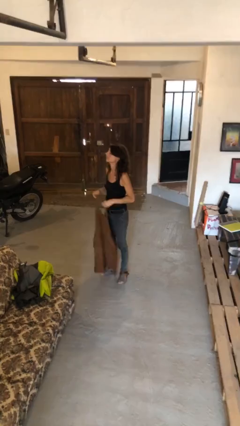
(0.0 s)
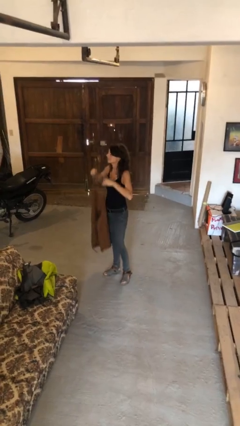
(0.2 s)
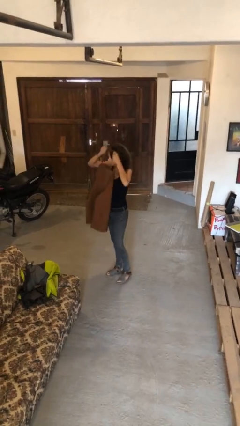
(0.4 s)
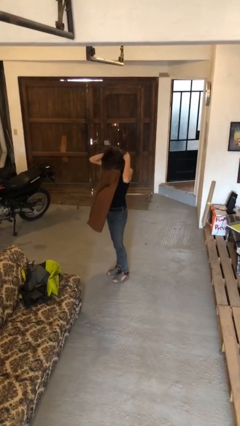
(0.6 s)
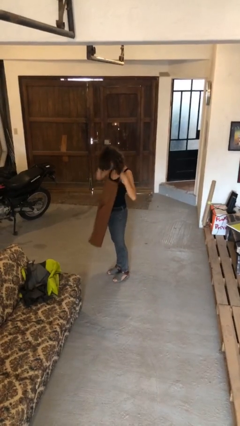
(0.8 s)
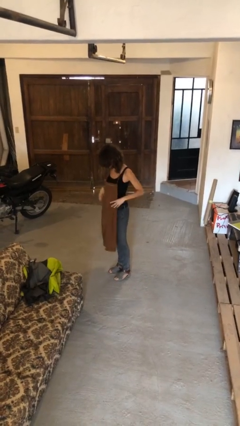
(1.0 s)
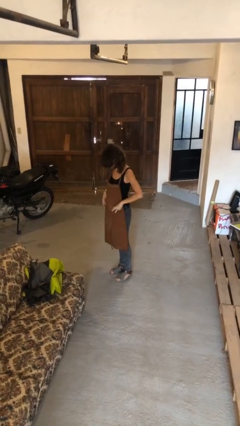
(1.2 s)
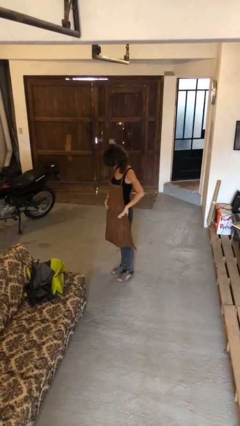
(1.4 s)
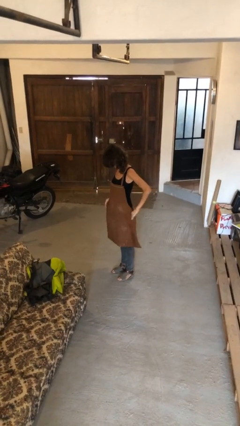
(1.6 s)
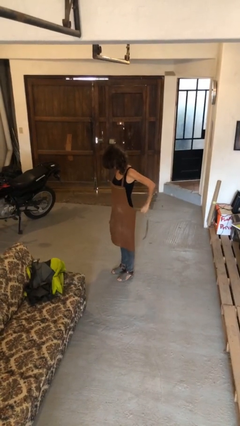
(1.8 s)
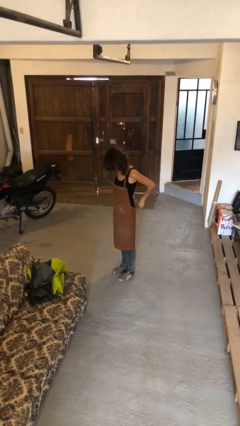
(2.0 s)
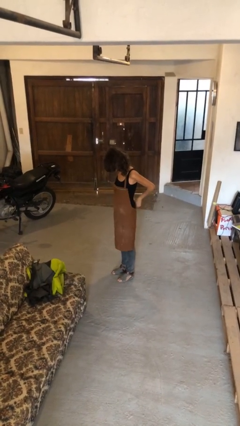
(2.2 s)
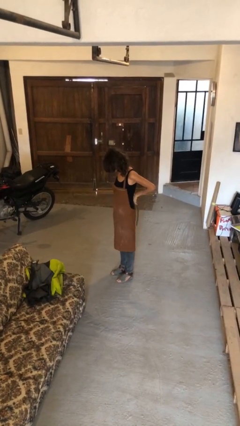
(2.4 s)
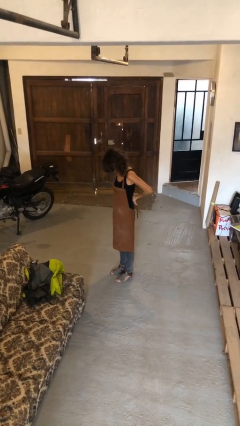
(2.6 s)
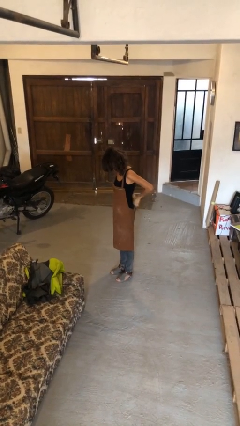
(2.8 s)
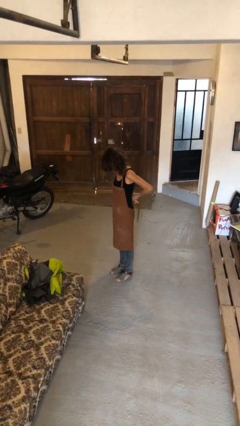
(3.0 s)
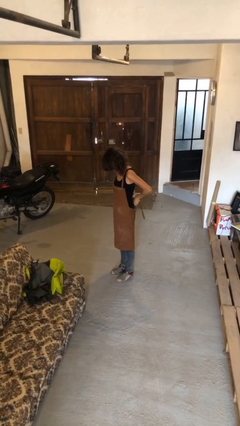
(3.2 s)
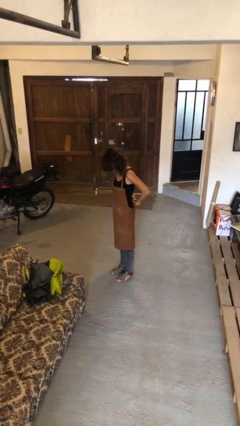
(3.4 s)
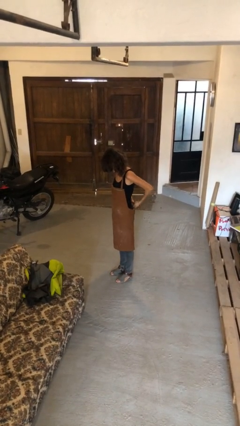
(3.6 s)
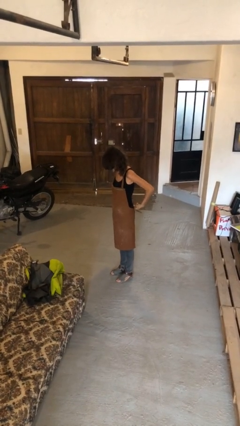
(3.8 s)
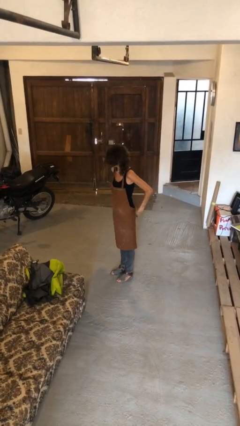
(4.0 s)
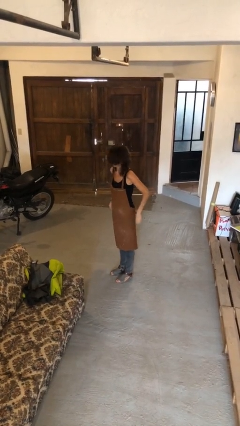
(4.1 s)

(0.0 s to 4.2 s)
person puts on apron

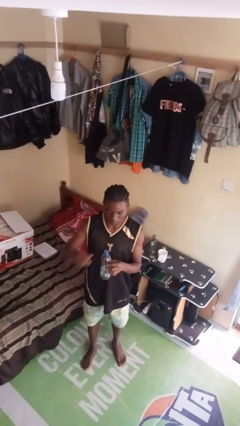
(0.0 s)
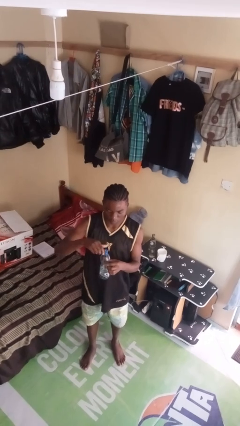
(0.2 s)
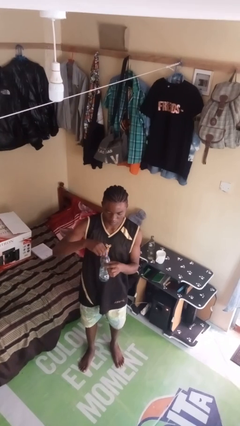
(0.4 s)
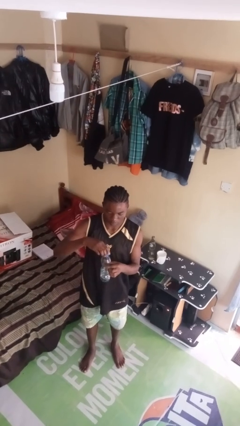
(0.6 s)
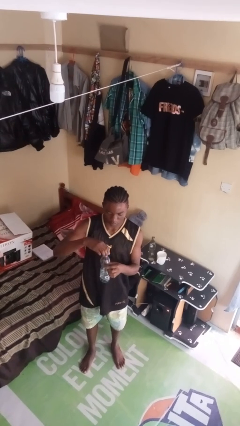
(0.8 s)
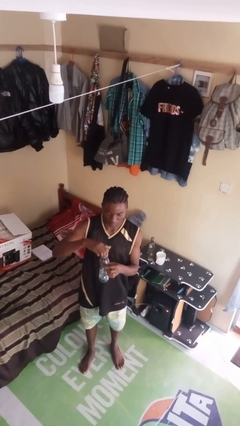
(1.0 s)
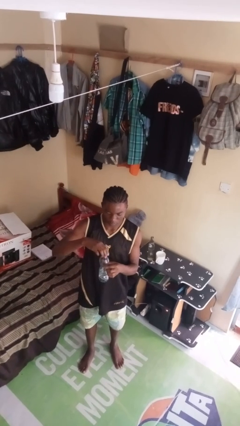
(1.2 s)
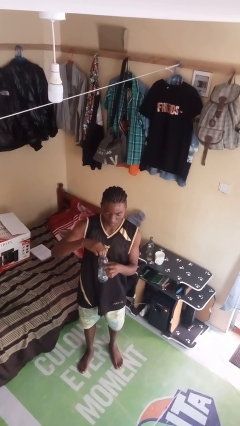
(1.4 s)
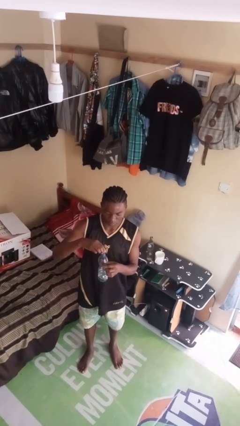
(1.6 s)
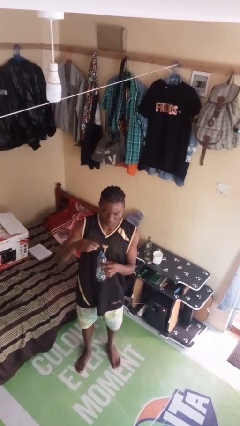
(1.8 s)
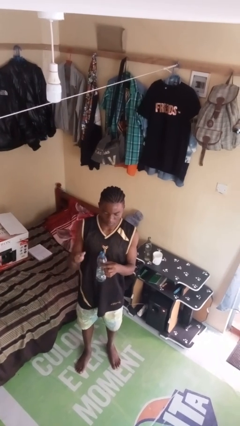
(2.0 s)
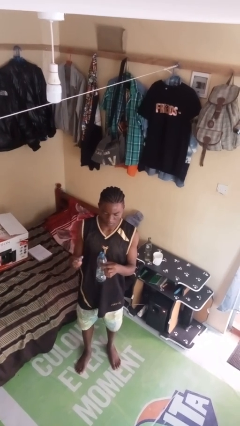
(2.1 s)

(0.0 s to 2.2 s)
person unscrews lid from bottle

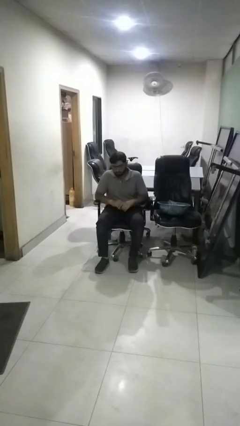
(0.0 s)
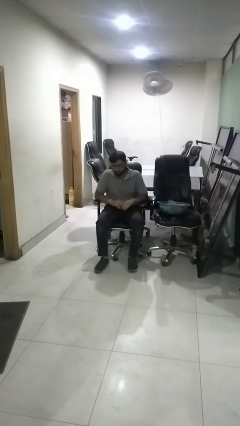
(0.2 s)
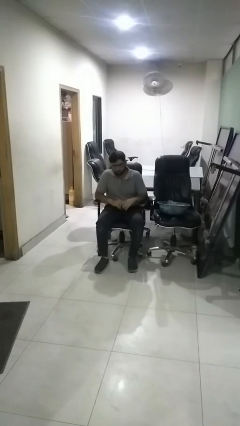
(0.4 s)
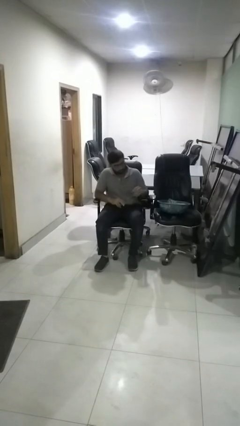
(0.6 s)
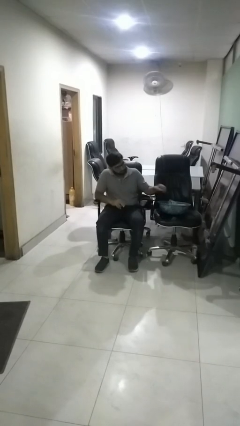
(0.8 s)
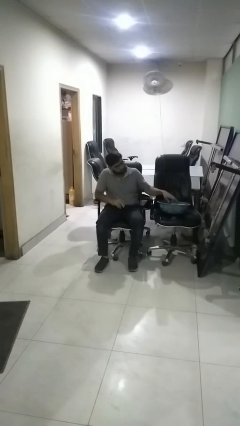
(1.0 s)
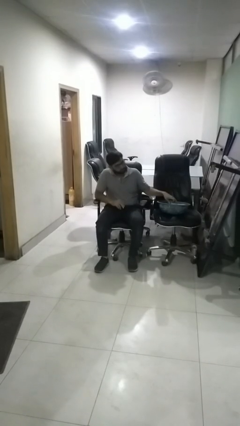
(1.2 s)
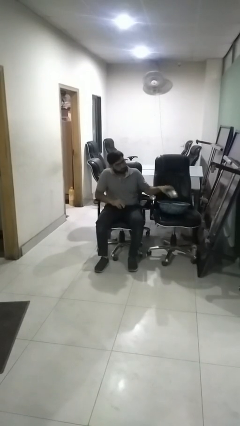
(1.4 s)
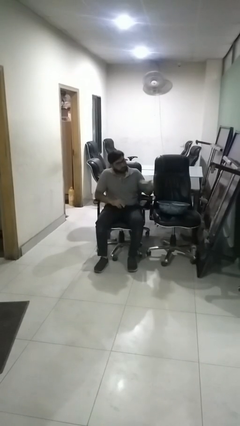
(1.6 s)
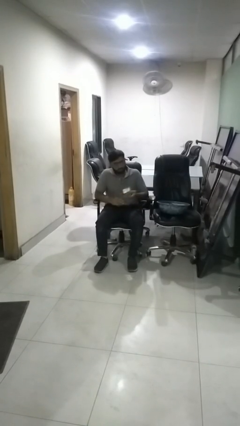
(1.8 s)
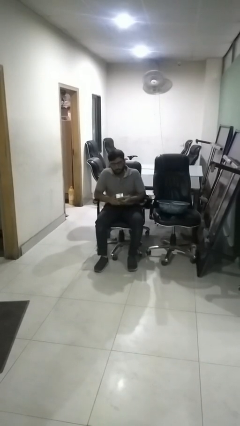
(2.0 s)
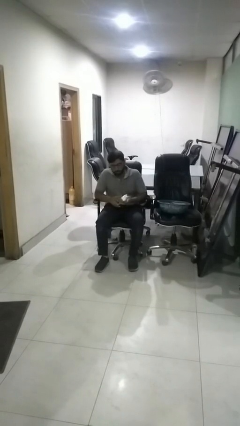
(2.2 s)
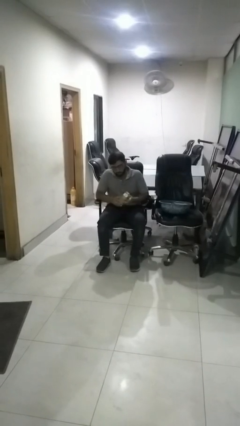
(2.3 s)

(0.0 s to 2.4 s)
person takes object from basket

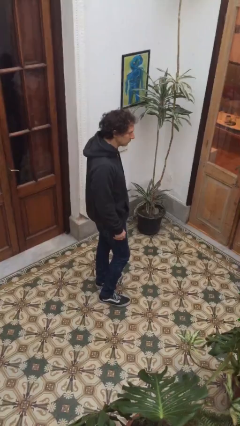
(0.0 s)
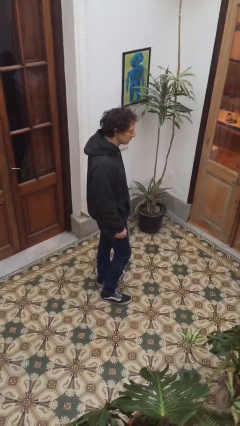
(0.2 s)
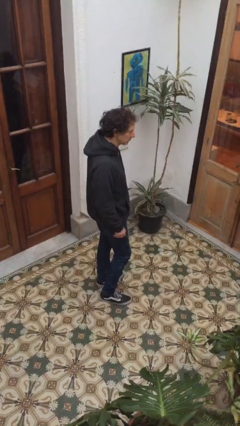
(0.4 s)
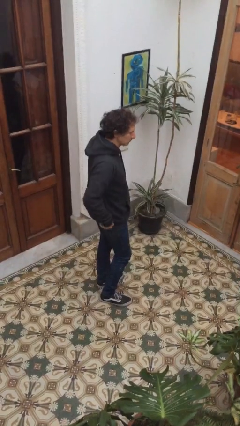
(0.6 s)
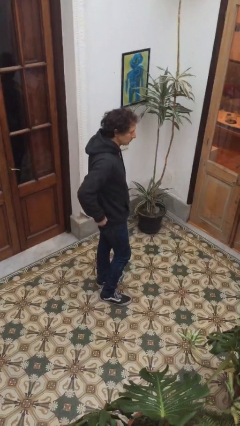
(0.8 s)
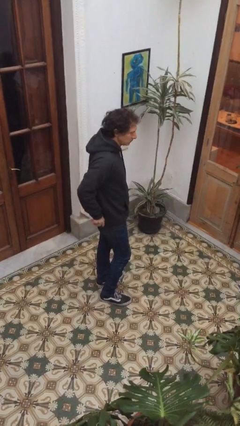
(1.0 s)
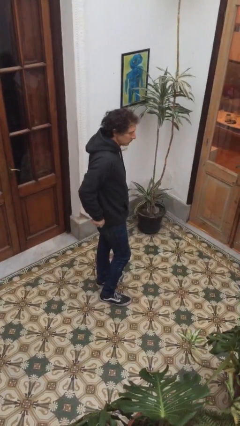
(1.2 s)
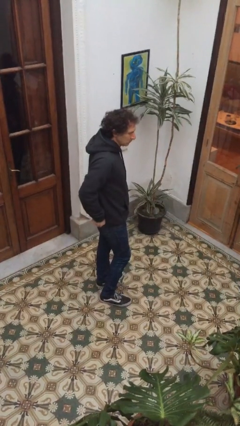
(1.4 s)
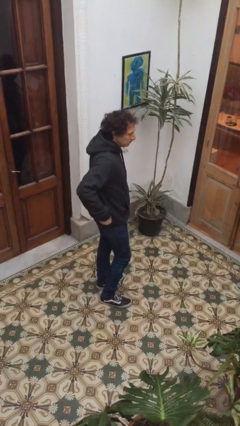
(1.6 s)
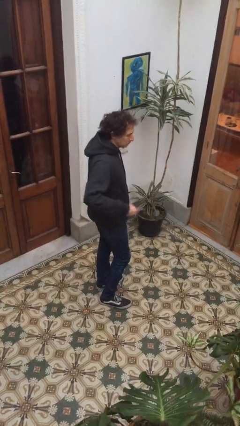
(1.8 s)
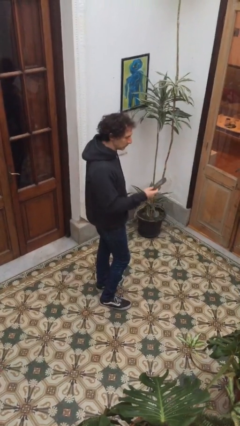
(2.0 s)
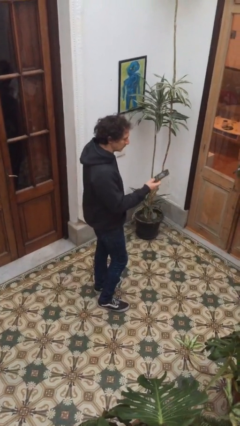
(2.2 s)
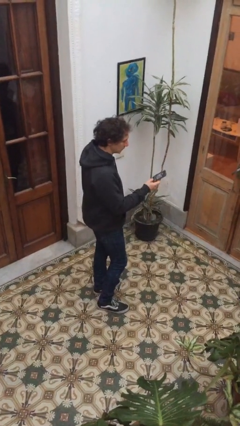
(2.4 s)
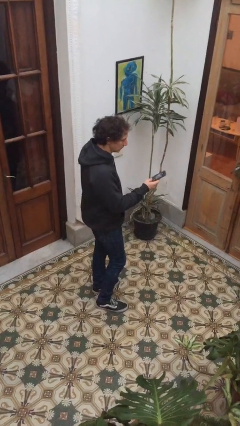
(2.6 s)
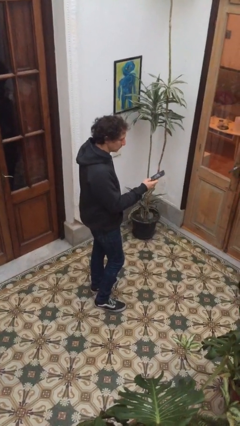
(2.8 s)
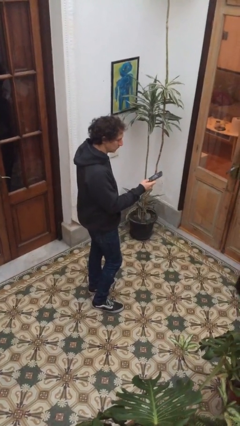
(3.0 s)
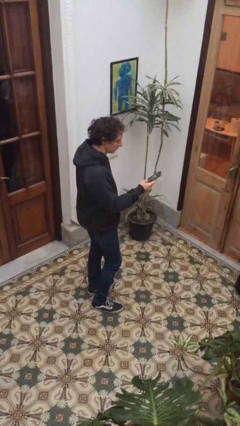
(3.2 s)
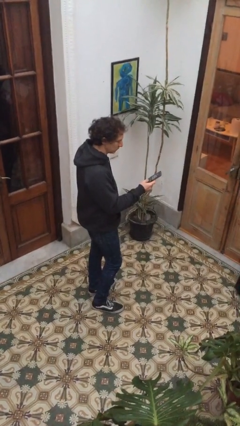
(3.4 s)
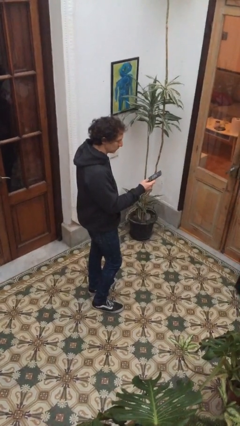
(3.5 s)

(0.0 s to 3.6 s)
person takes phone from pocket

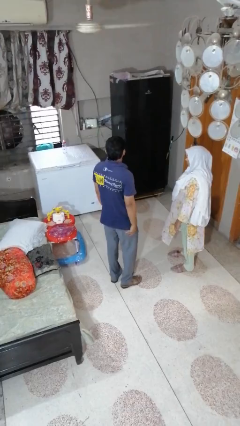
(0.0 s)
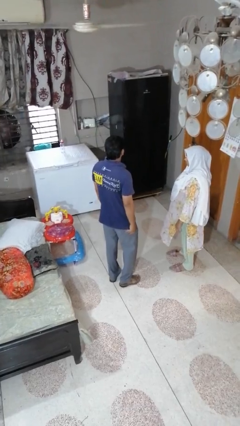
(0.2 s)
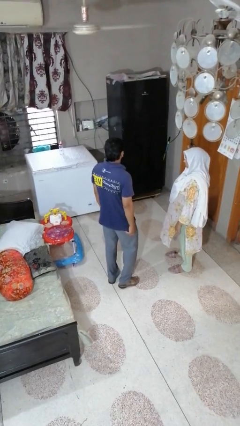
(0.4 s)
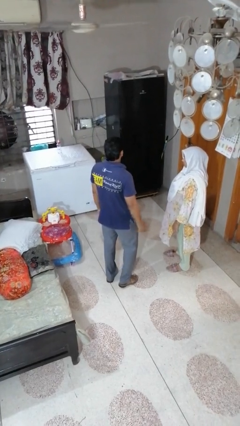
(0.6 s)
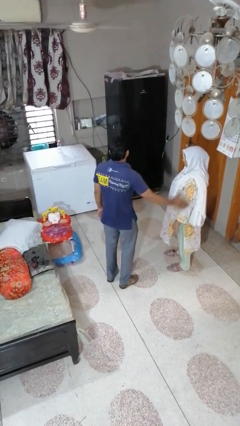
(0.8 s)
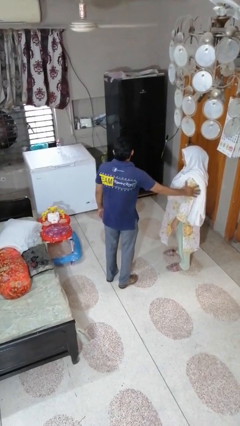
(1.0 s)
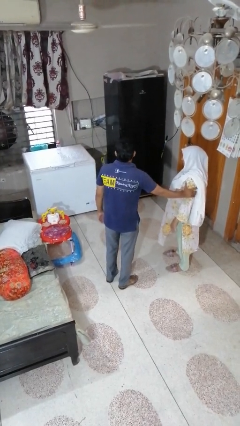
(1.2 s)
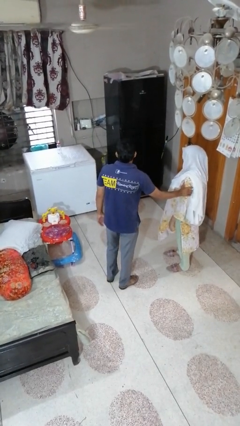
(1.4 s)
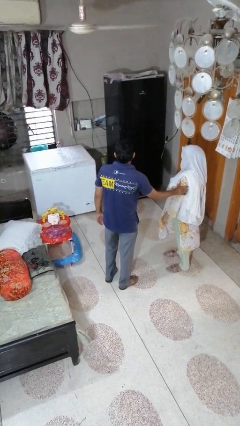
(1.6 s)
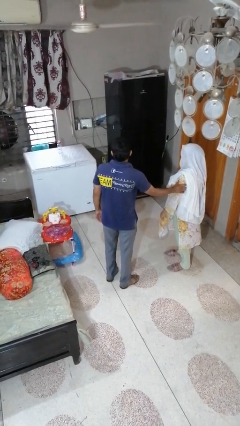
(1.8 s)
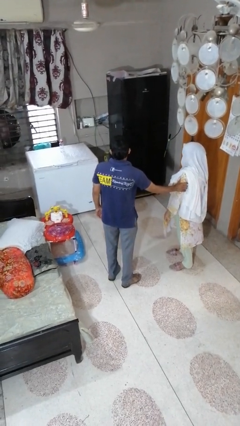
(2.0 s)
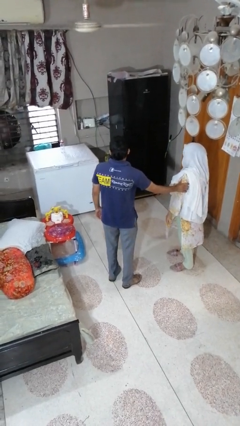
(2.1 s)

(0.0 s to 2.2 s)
person grabs person by bicep

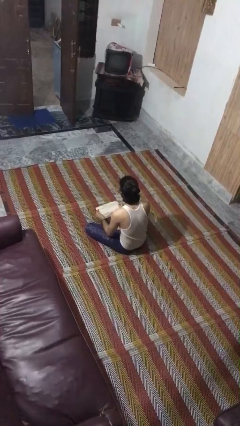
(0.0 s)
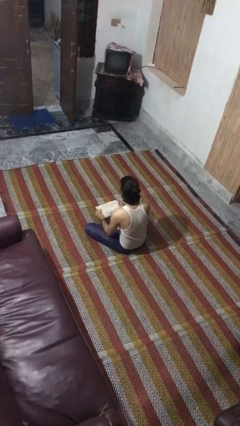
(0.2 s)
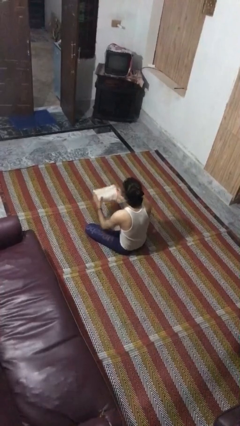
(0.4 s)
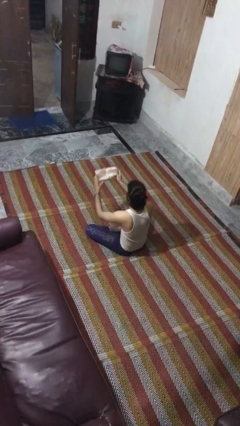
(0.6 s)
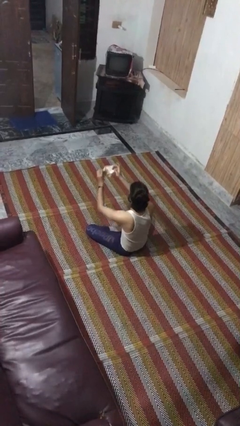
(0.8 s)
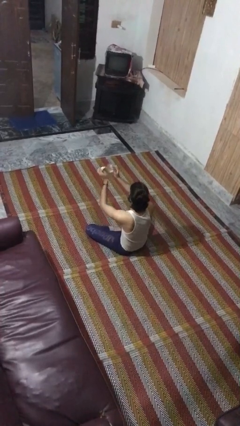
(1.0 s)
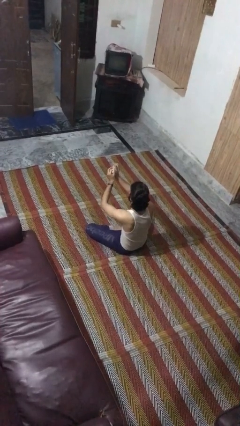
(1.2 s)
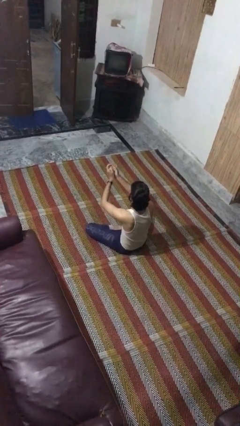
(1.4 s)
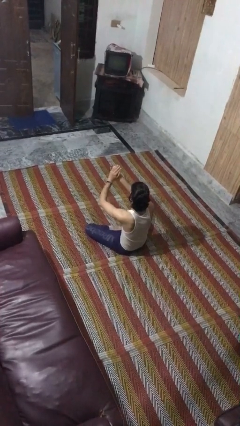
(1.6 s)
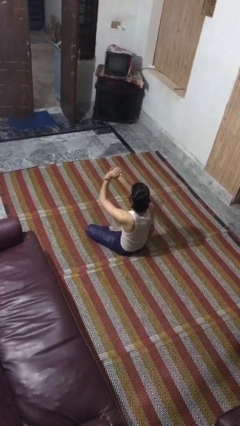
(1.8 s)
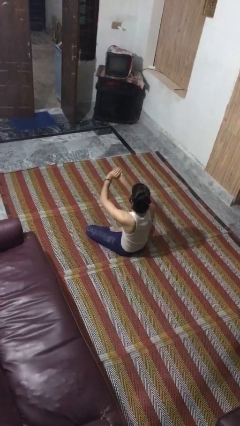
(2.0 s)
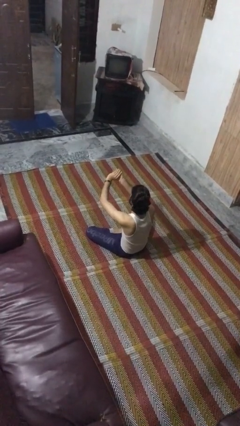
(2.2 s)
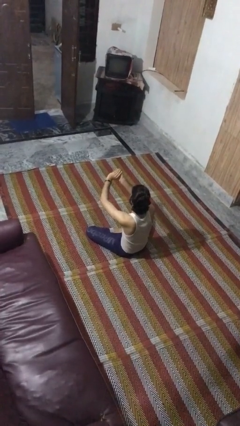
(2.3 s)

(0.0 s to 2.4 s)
person crumples paper

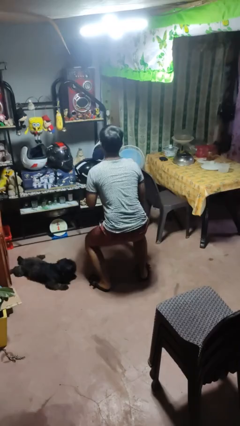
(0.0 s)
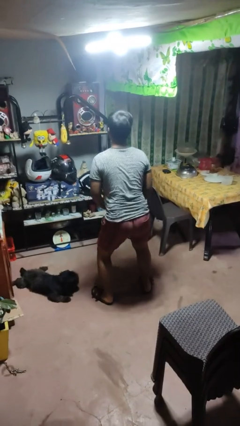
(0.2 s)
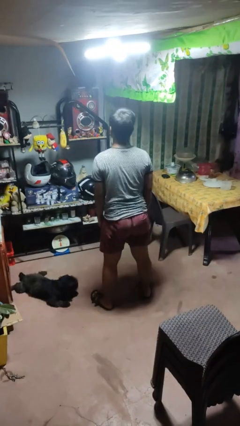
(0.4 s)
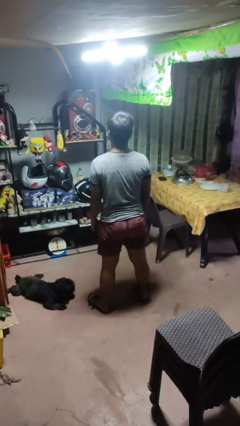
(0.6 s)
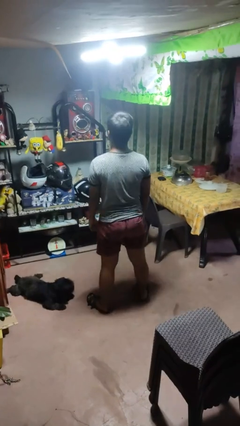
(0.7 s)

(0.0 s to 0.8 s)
person stands up
